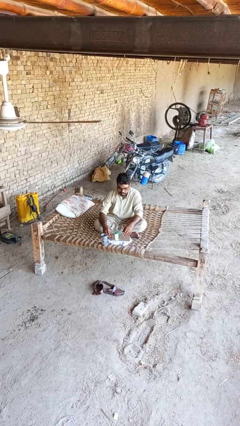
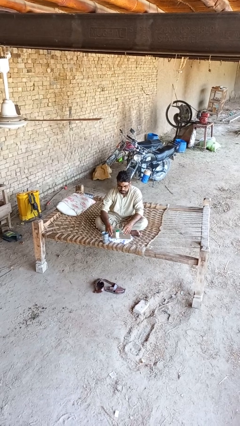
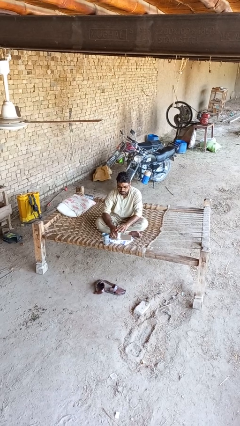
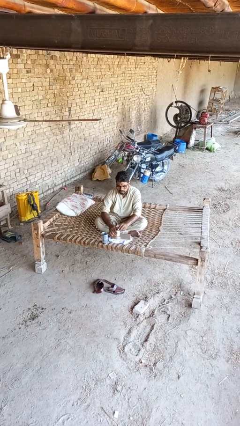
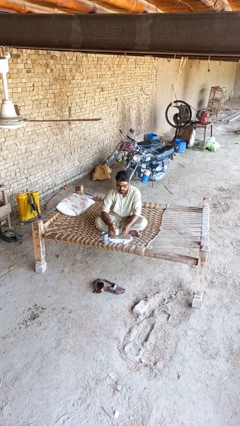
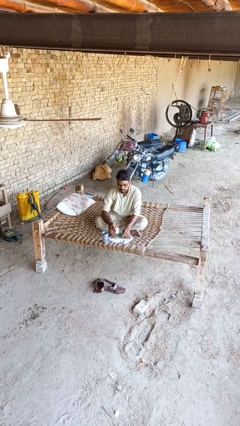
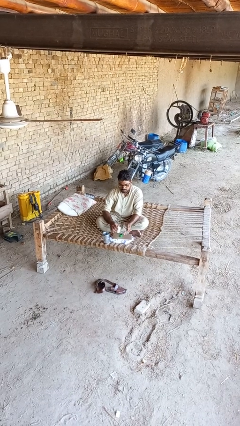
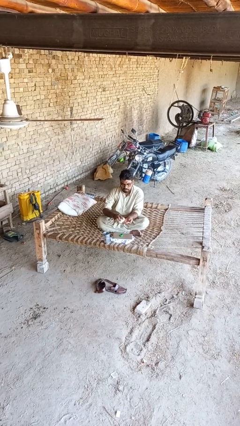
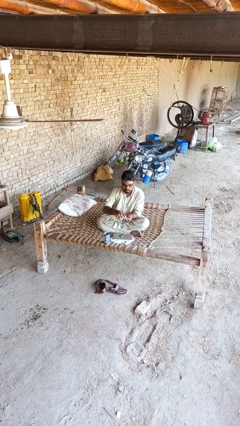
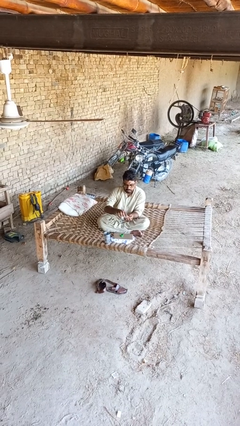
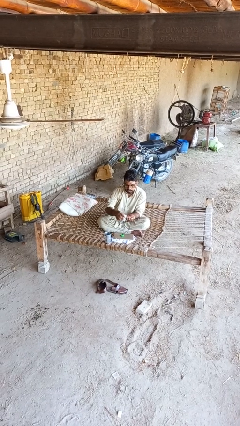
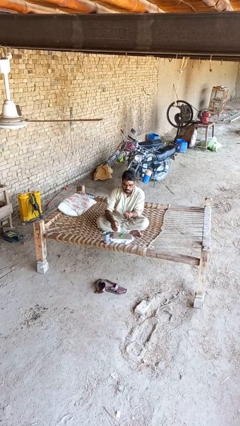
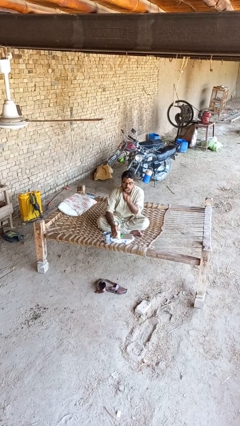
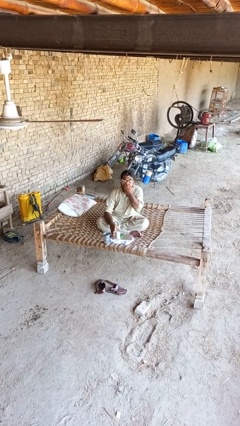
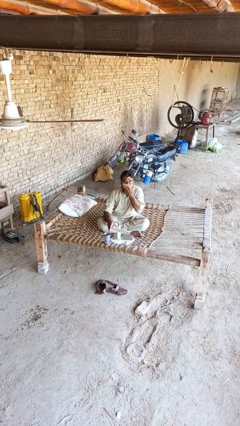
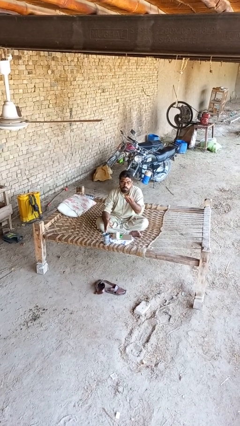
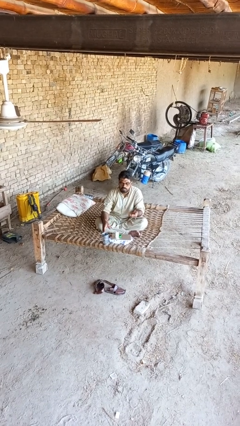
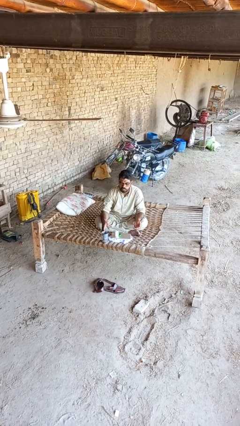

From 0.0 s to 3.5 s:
person takes medicine pills

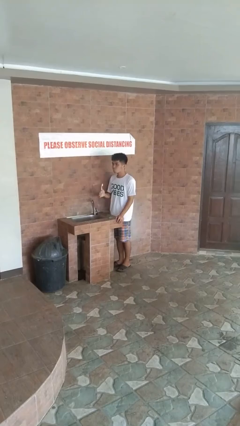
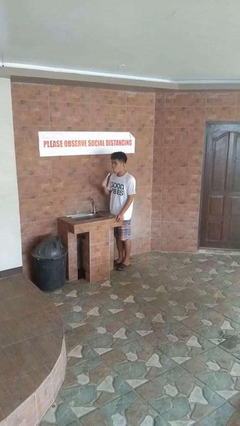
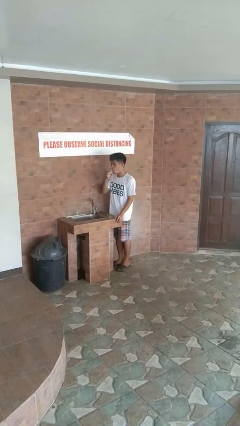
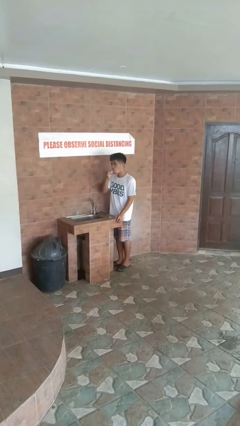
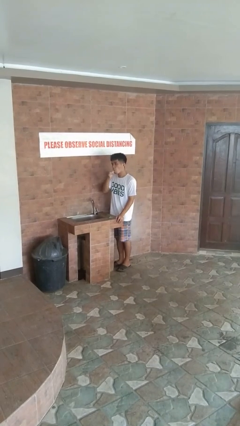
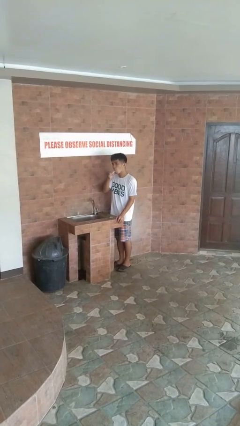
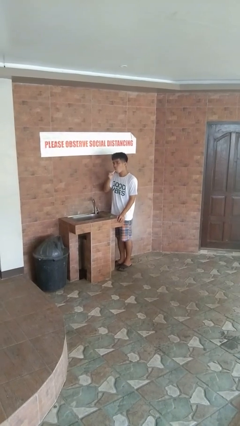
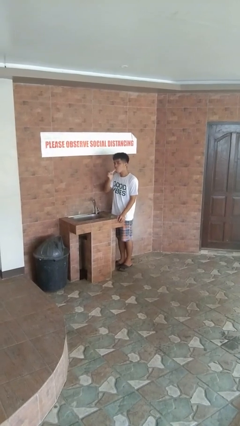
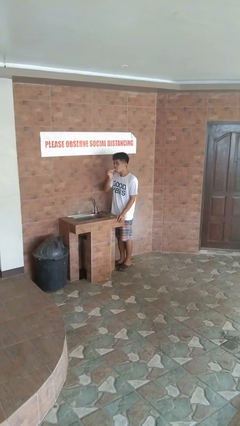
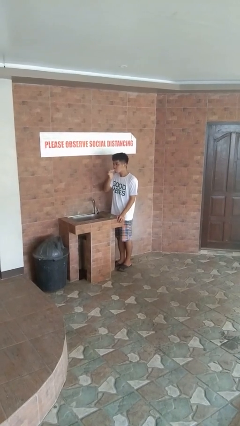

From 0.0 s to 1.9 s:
person brushes teeth

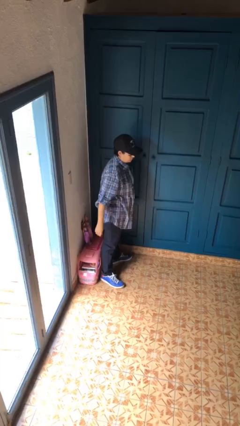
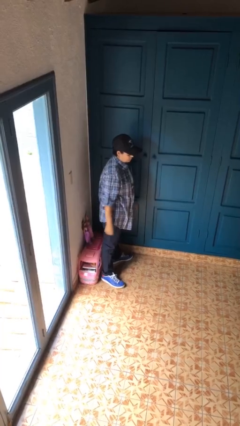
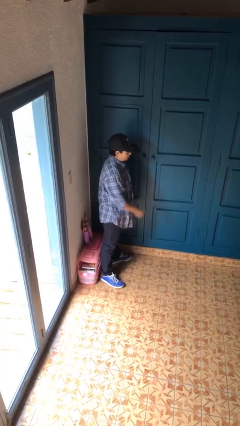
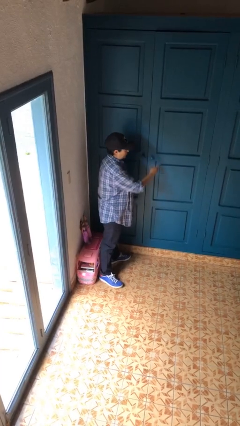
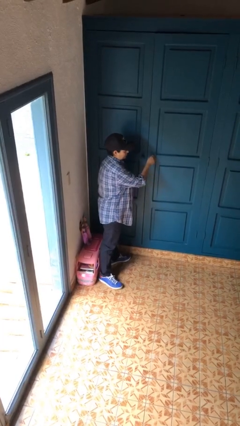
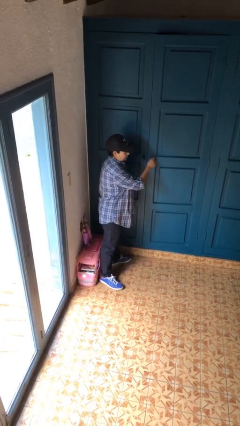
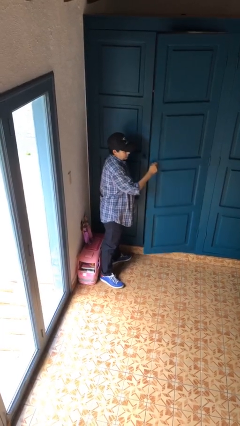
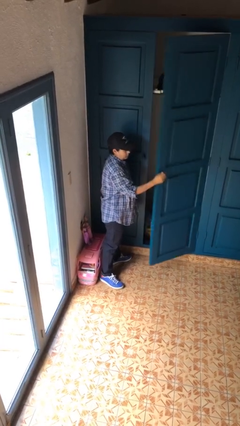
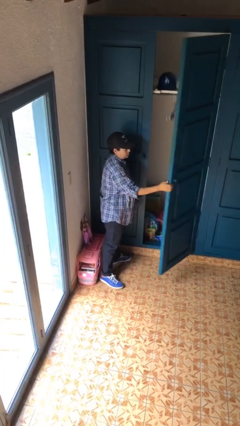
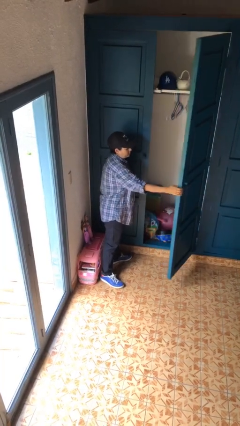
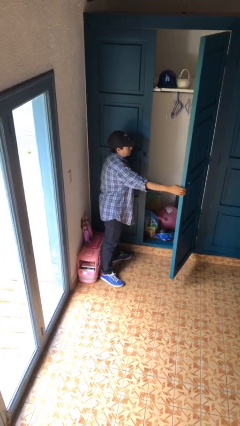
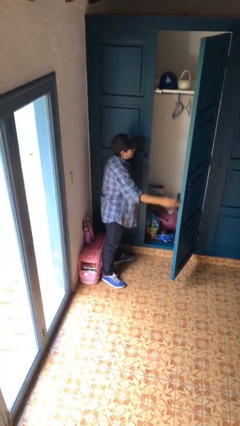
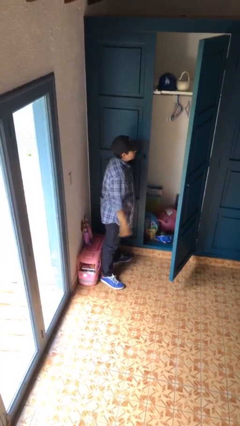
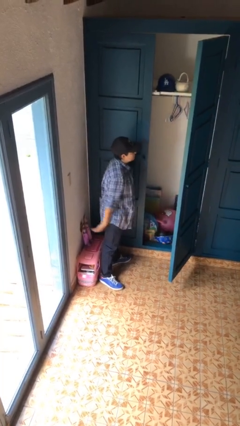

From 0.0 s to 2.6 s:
person opens closet door

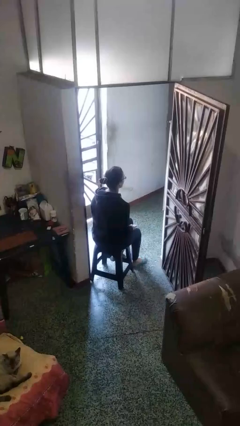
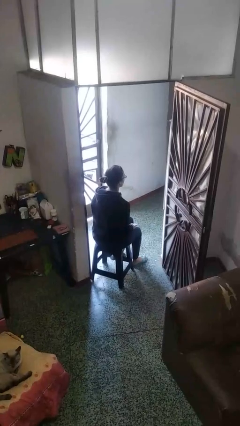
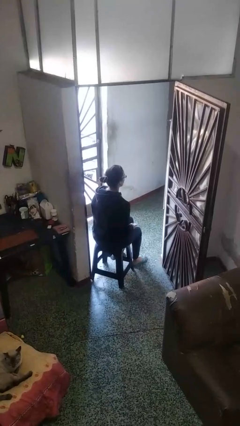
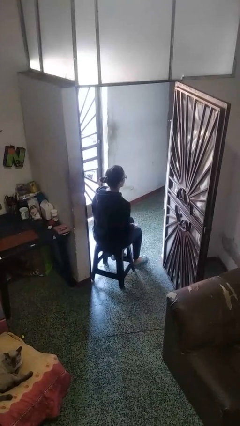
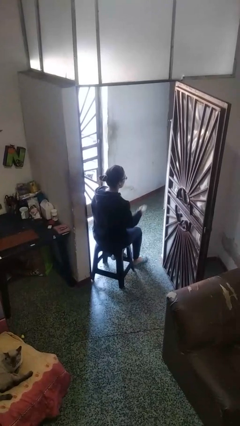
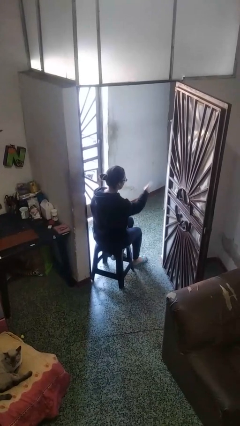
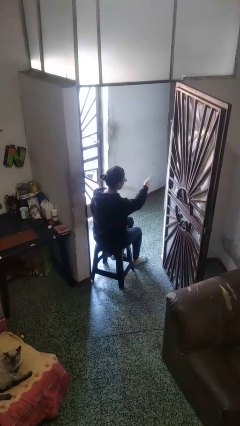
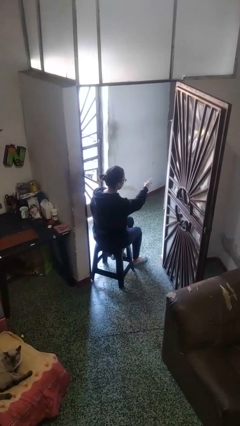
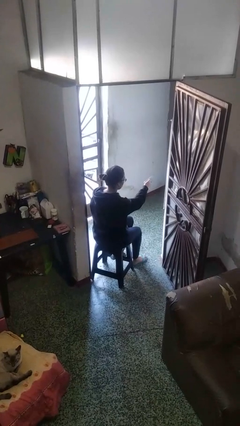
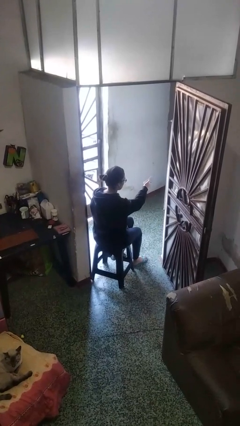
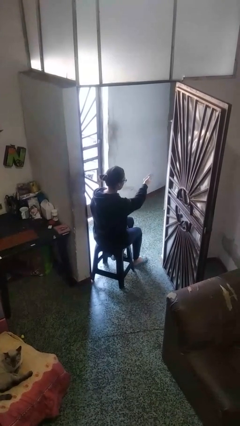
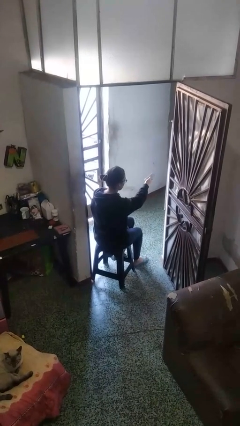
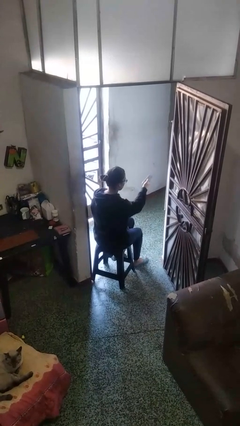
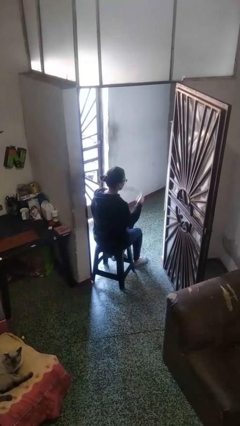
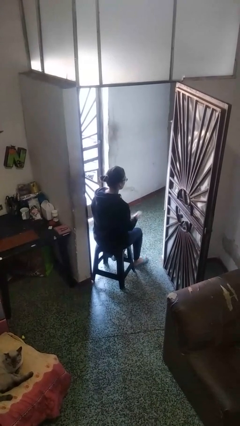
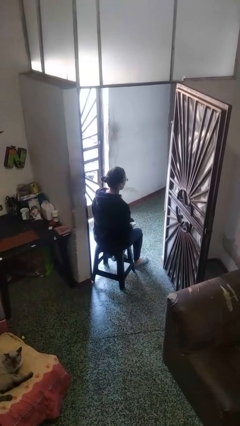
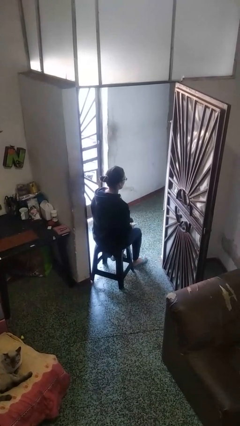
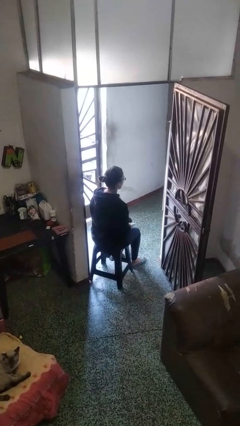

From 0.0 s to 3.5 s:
person uses television remote

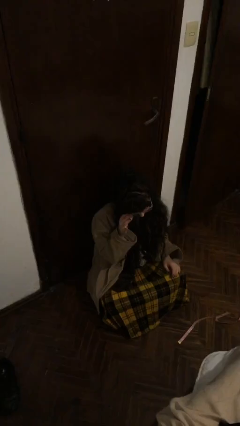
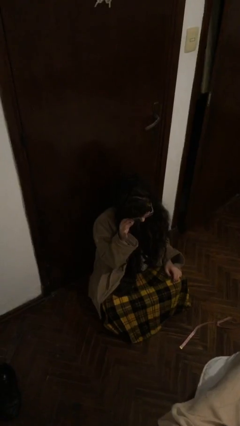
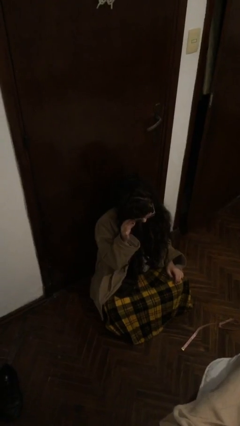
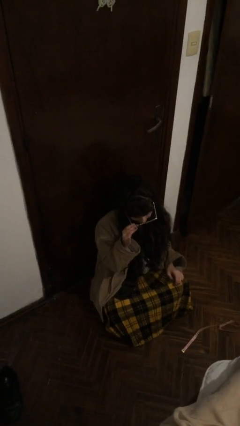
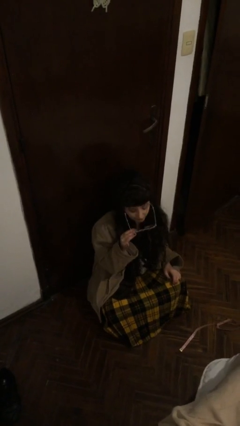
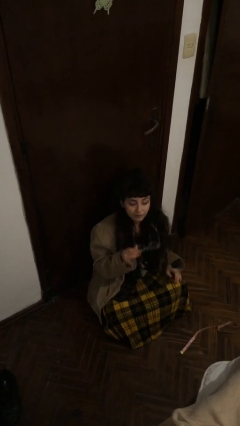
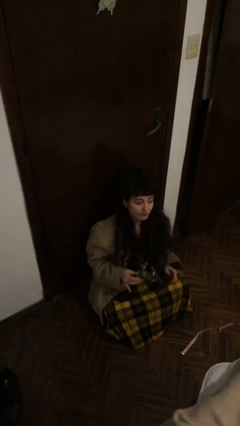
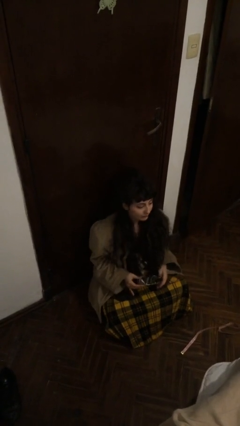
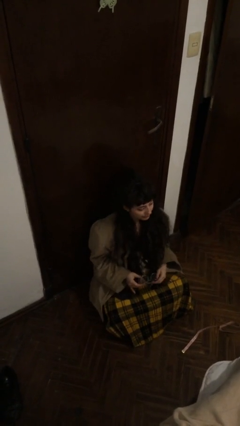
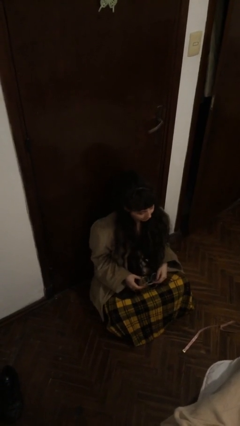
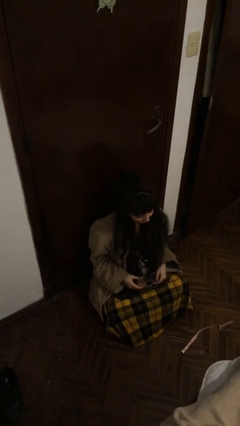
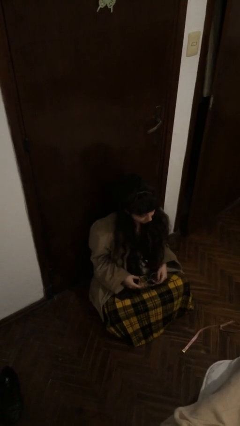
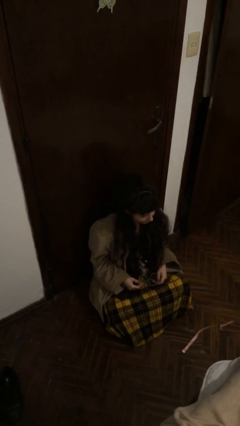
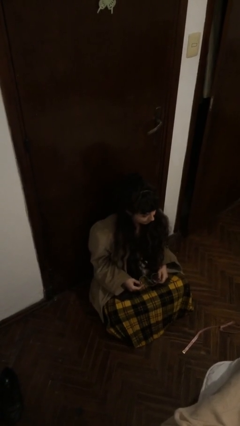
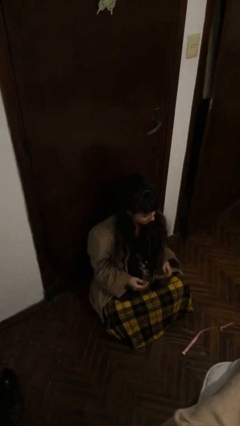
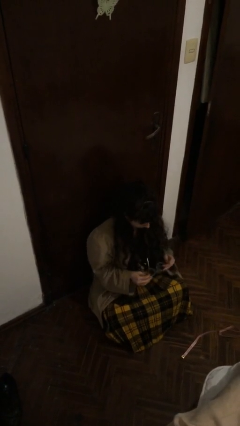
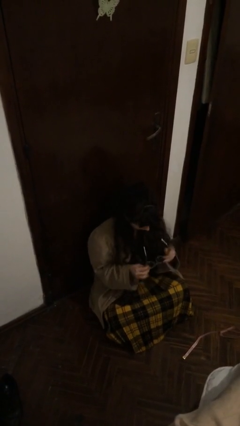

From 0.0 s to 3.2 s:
person takes off glasses

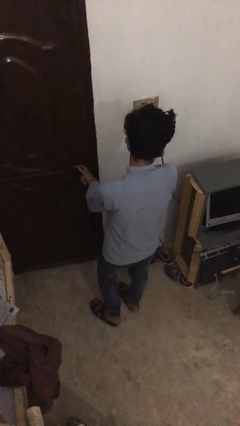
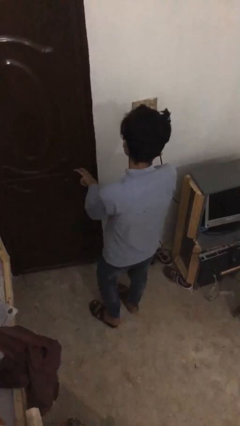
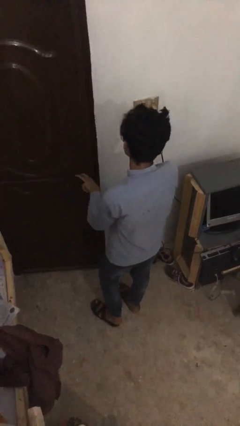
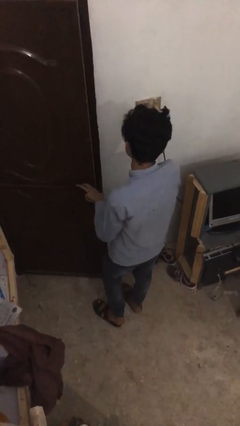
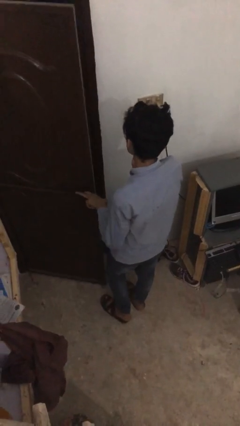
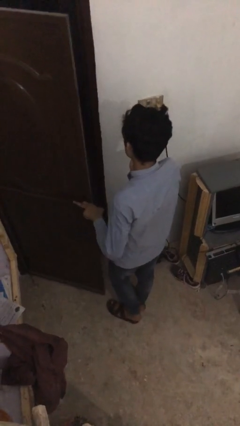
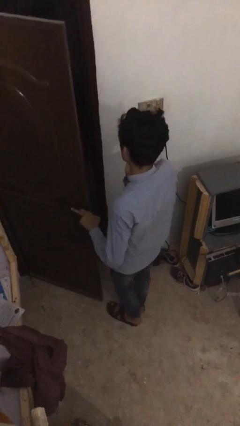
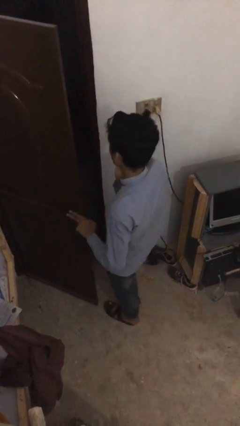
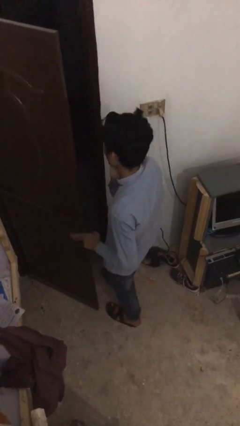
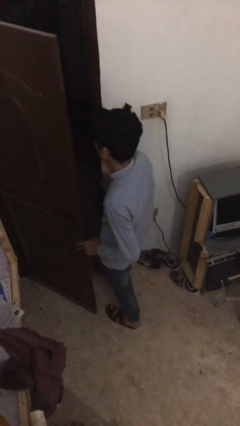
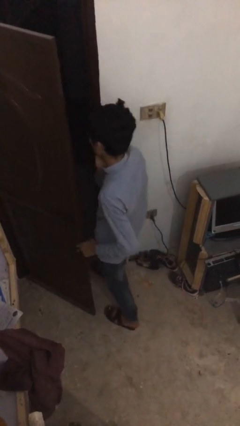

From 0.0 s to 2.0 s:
person opens facility door

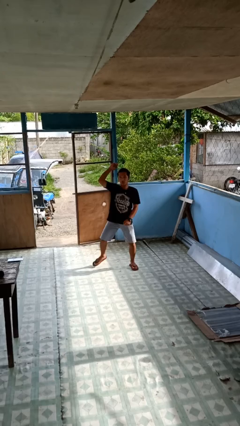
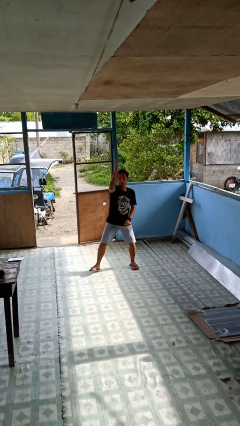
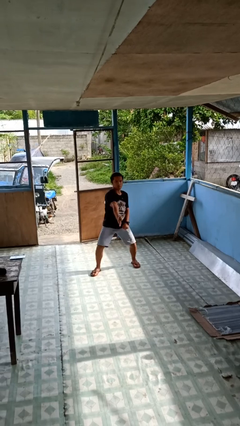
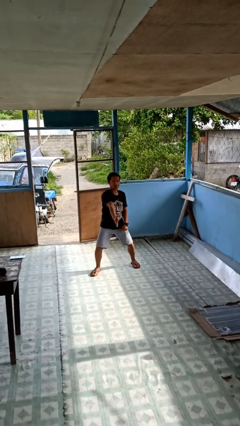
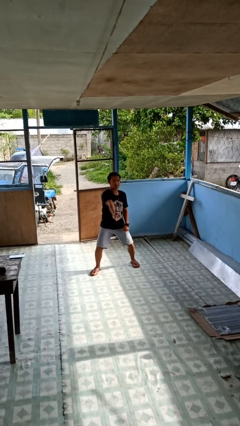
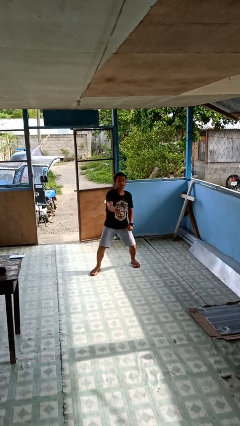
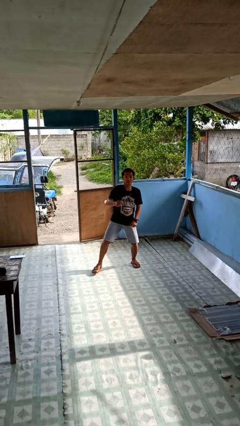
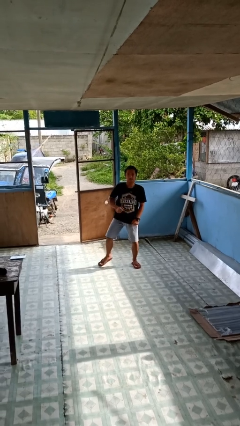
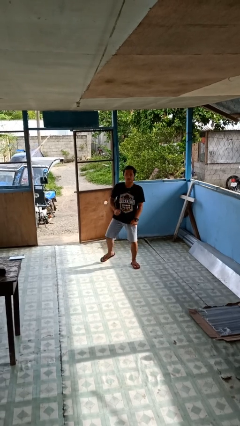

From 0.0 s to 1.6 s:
person karate chop
